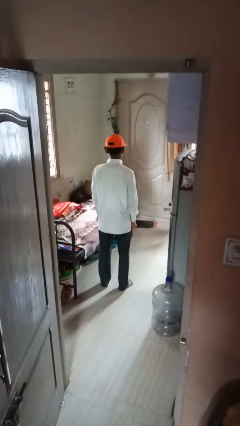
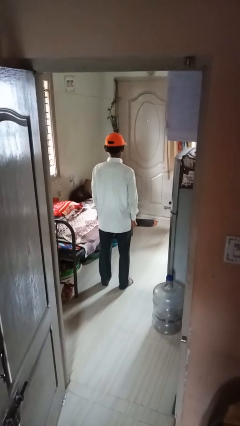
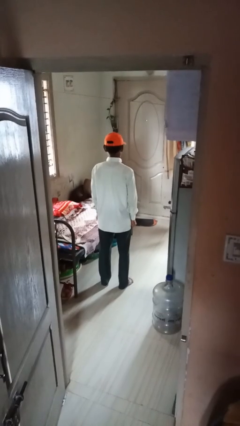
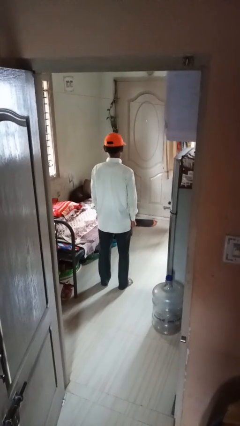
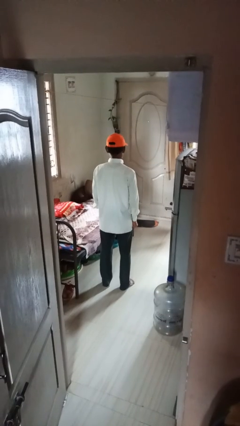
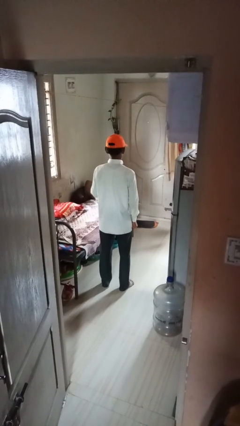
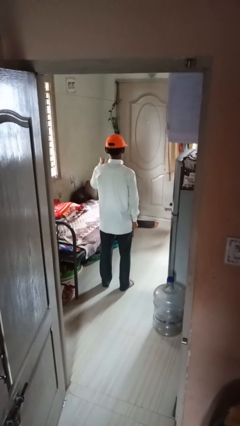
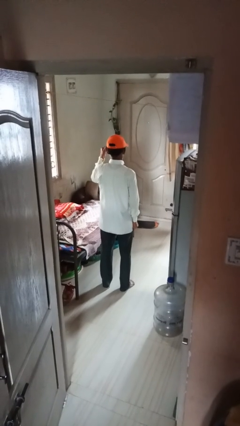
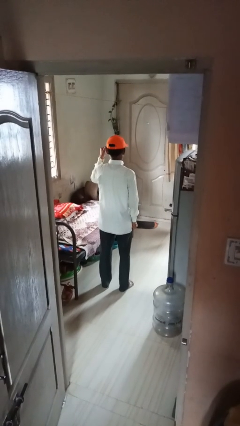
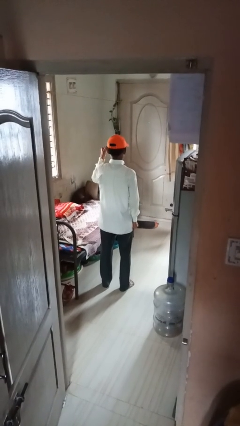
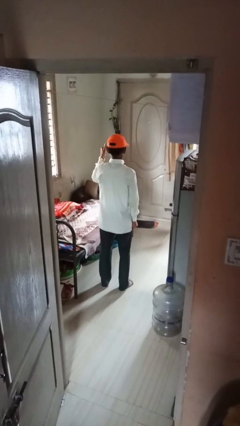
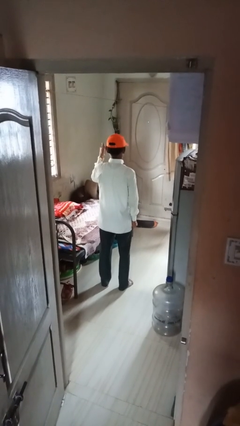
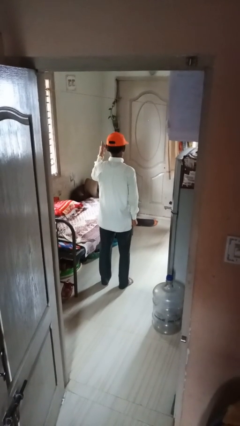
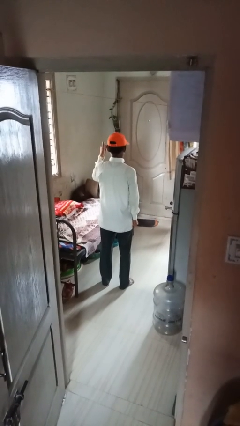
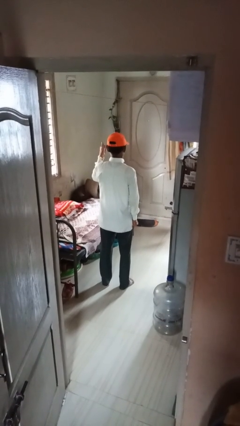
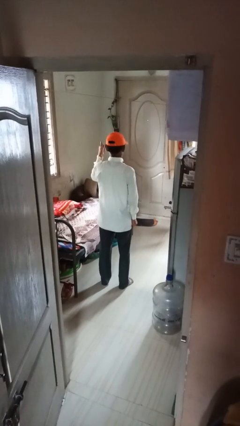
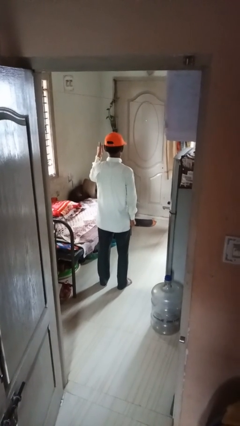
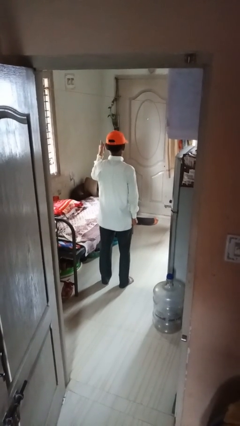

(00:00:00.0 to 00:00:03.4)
person gestures thumbs up

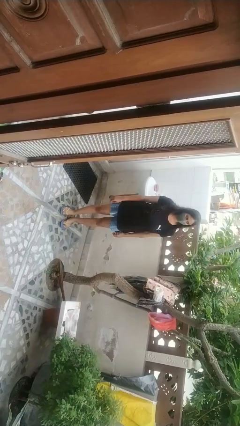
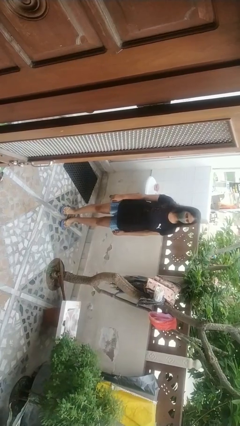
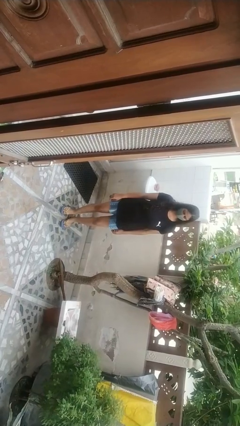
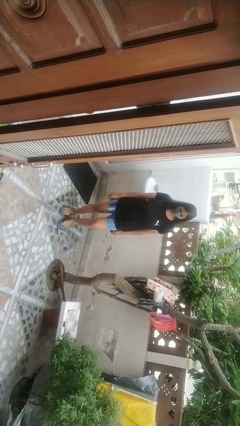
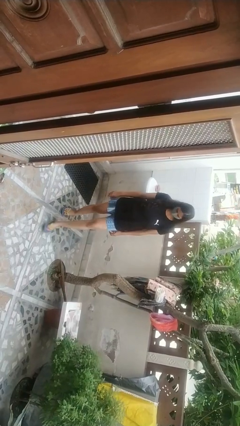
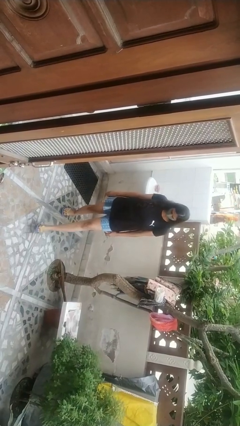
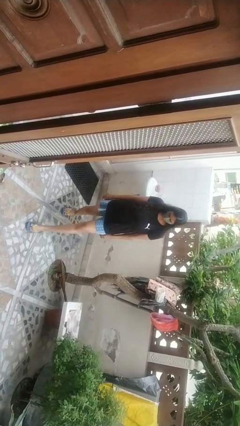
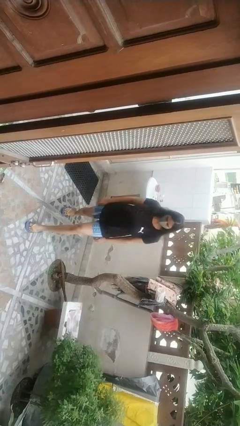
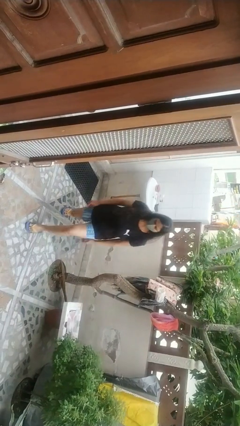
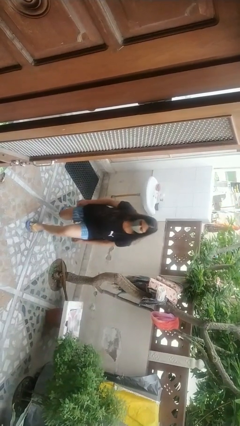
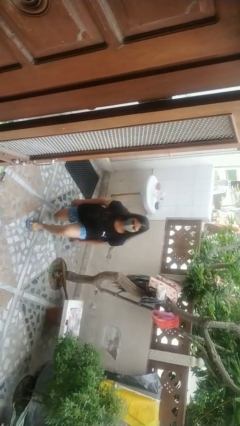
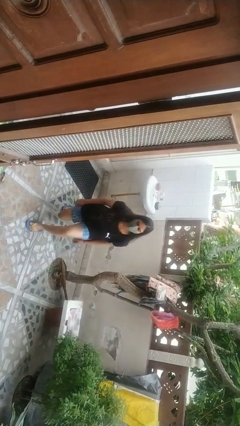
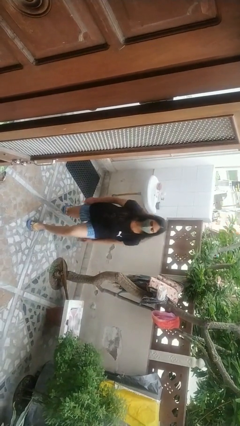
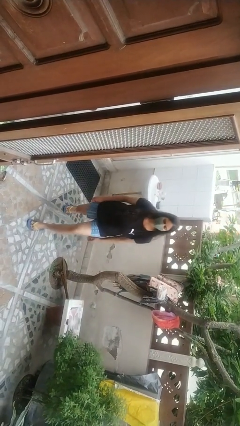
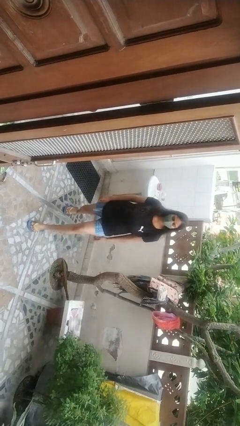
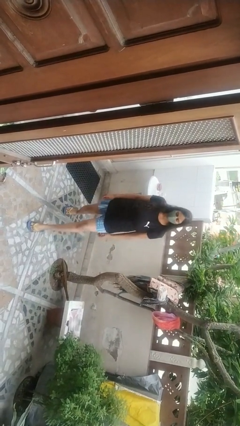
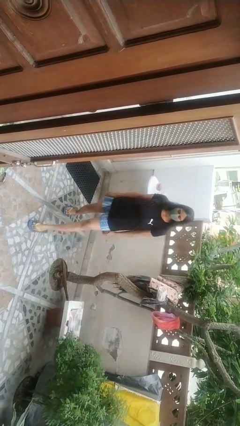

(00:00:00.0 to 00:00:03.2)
person exercises with lunges

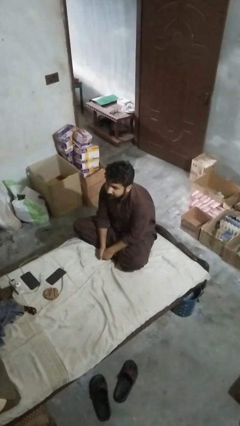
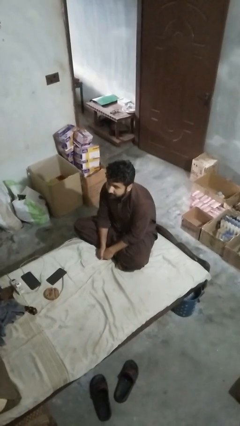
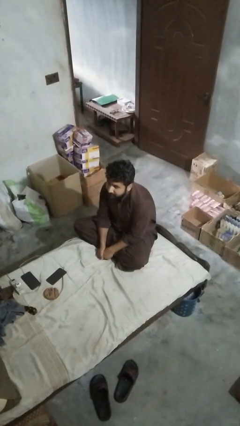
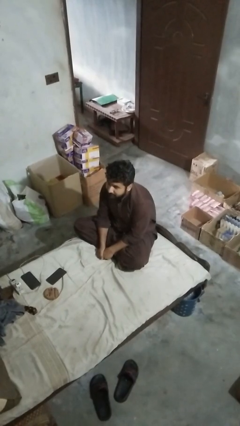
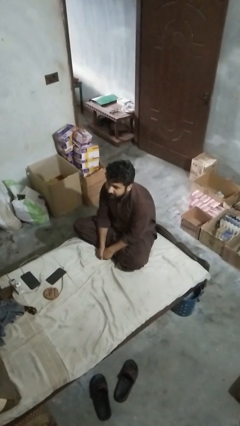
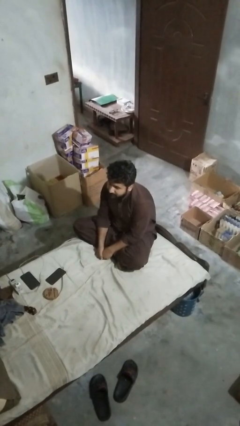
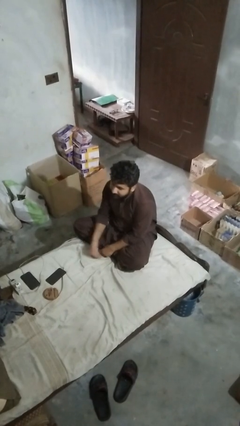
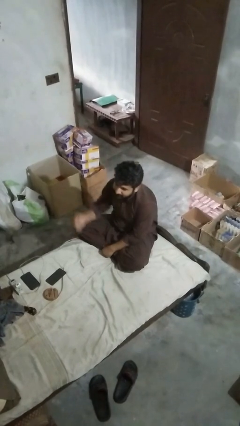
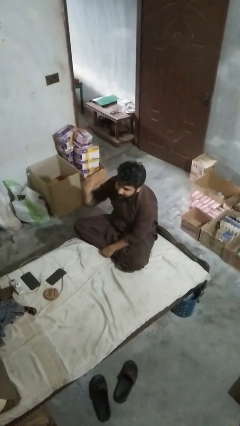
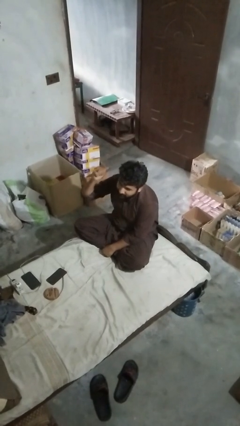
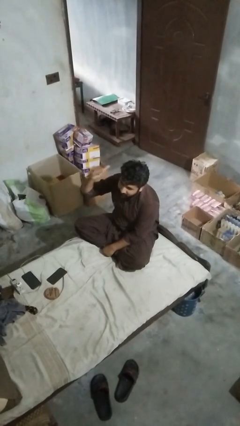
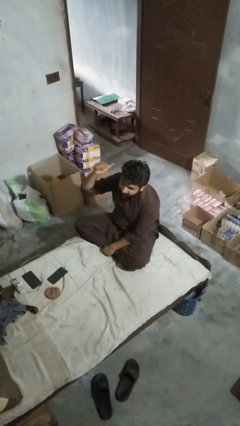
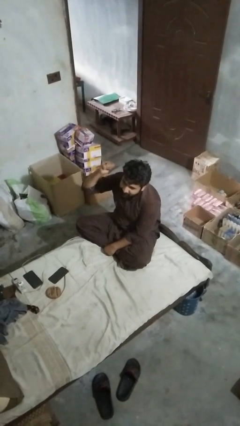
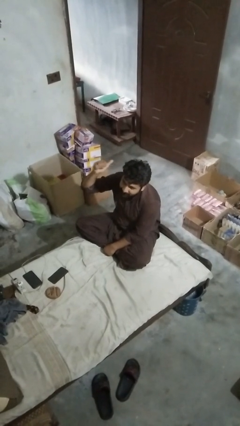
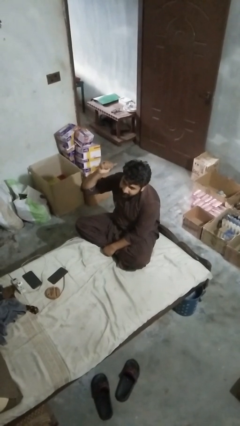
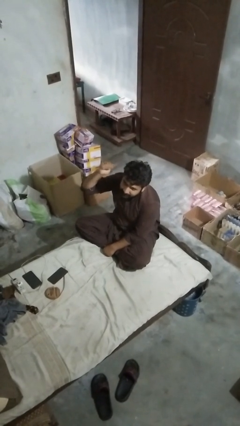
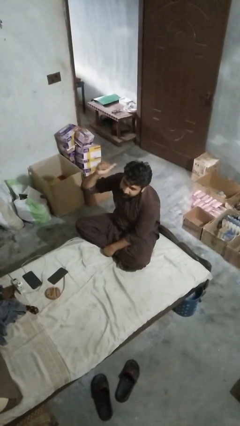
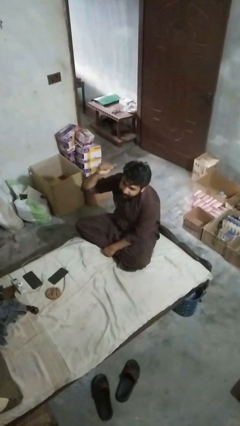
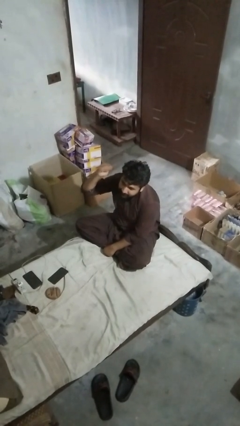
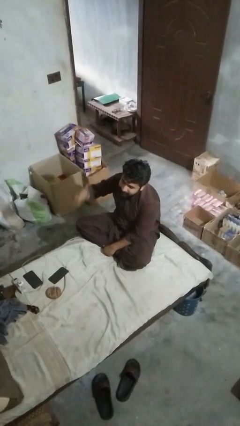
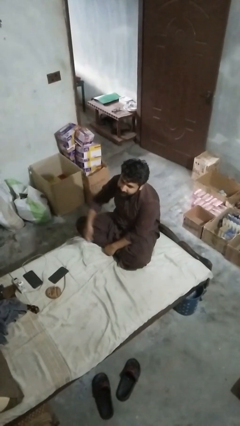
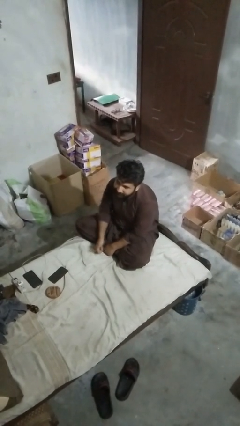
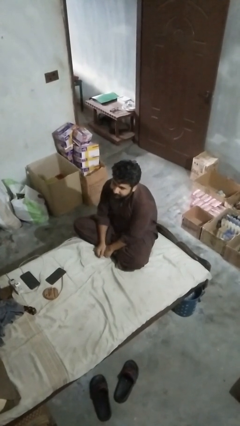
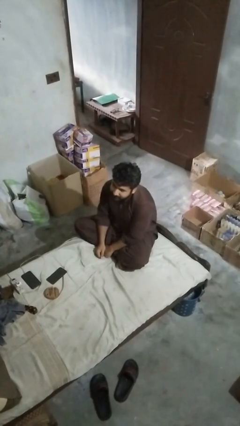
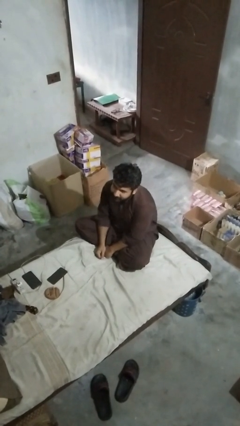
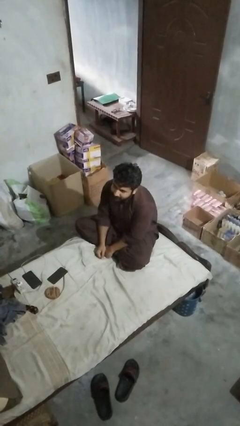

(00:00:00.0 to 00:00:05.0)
person gestures behind me

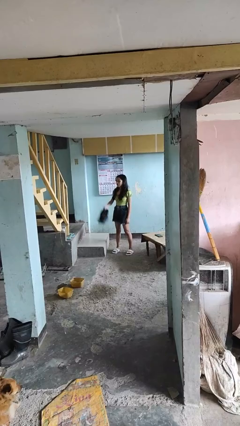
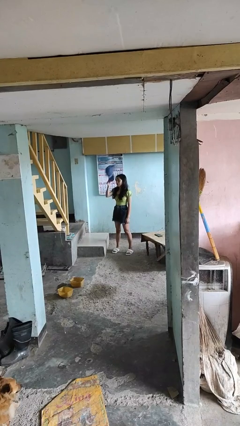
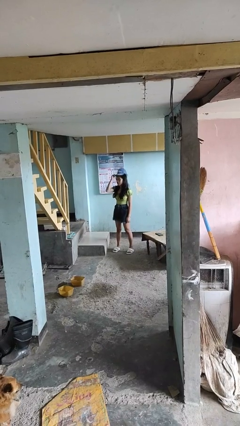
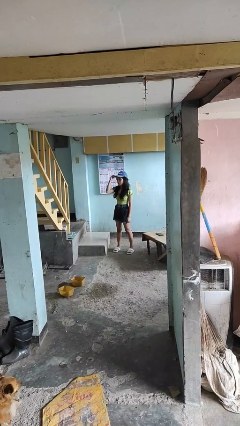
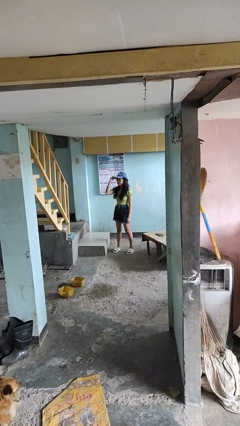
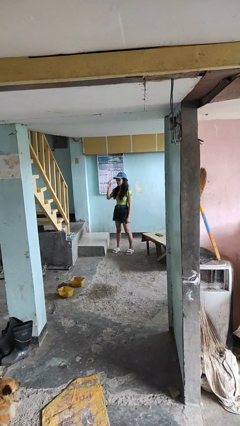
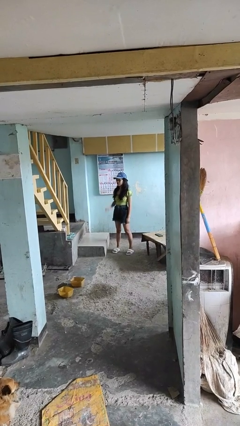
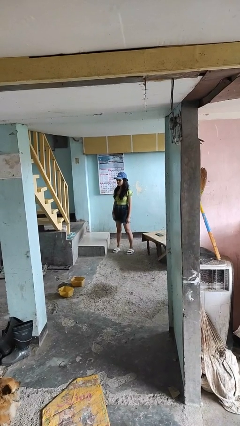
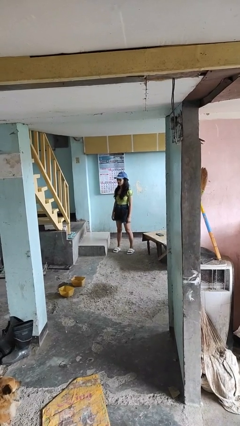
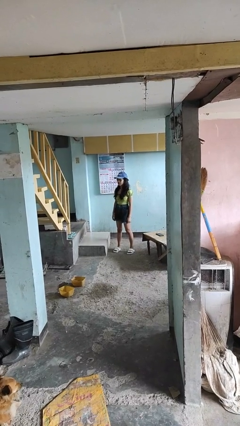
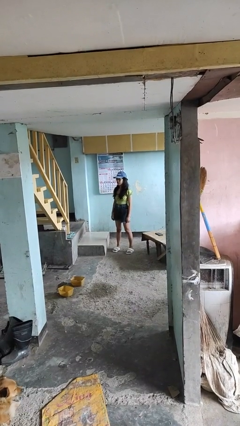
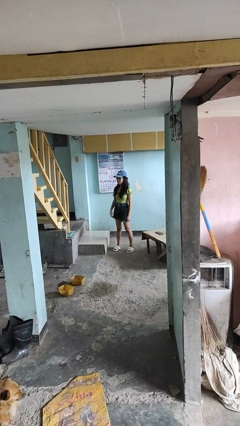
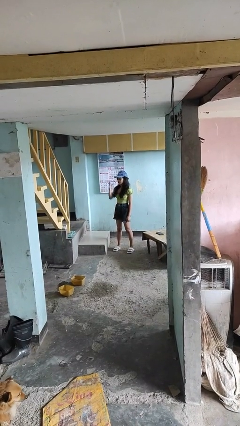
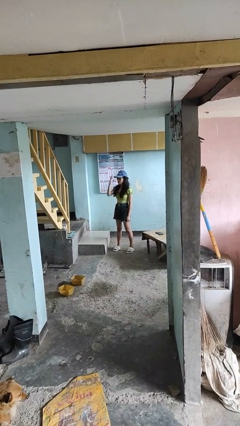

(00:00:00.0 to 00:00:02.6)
person puts on hat

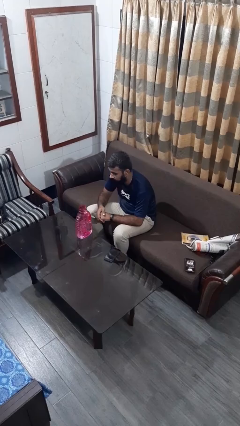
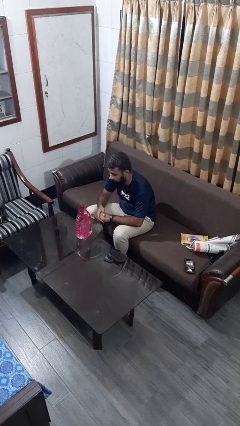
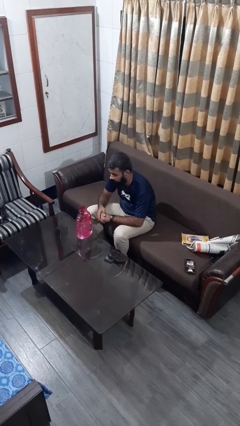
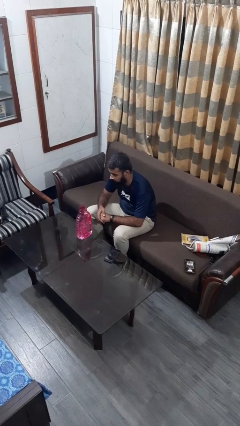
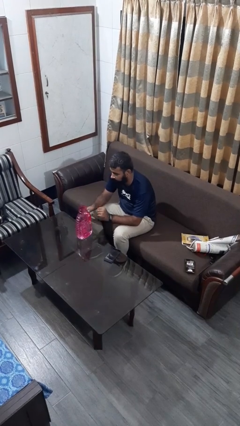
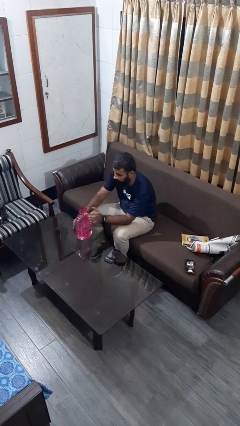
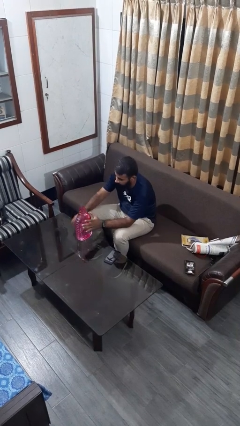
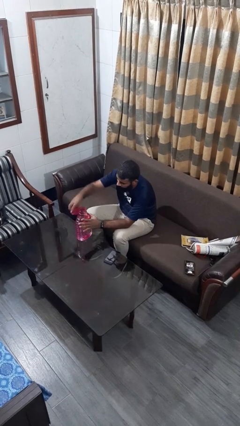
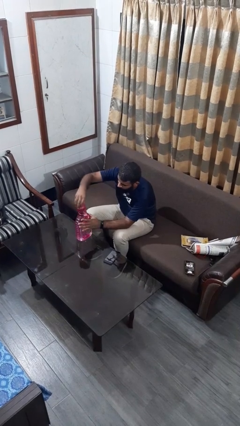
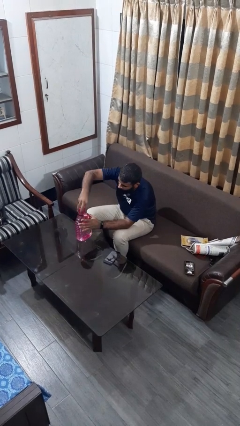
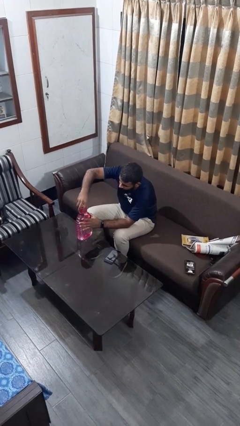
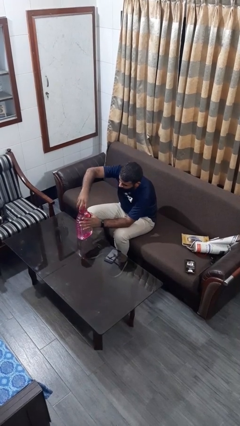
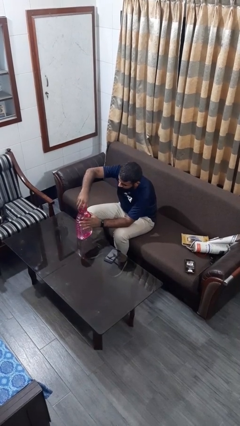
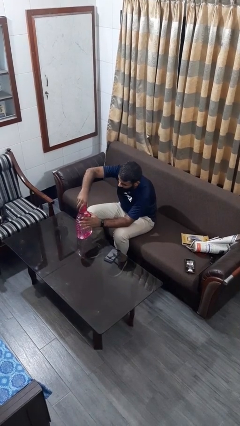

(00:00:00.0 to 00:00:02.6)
person screws lid to bottle

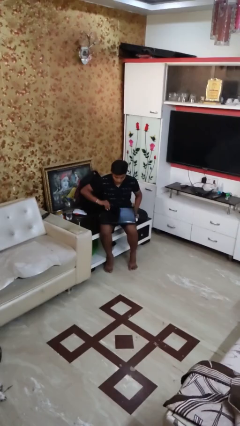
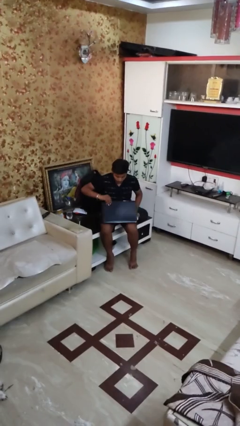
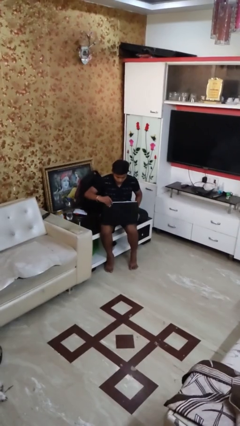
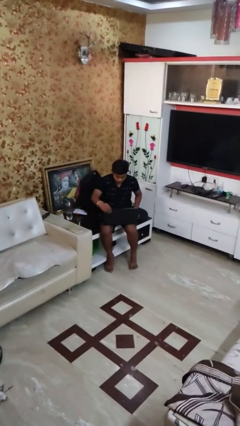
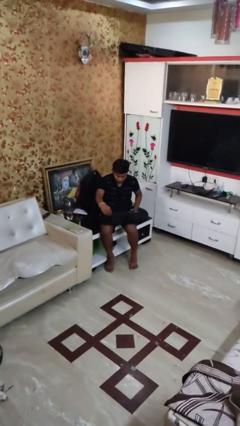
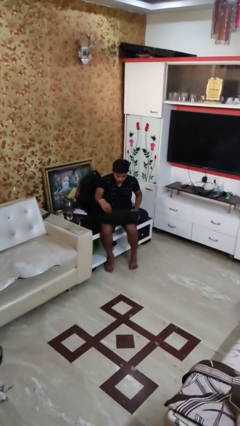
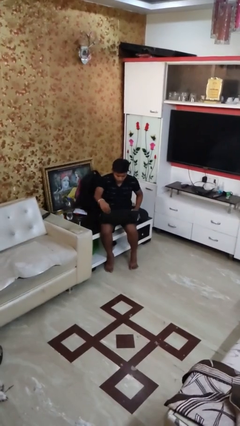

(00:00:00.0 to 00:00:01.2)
person opens laptop
